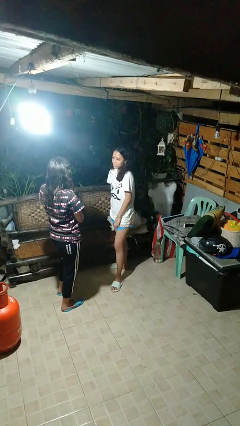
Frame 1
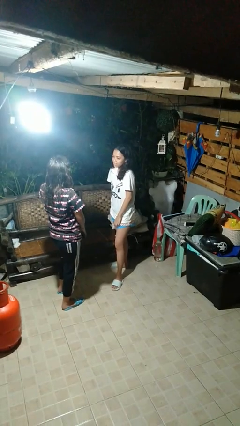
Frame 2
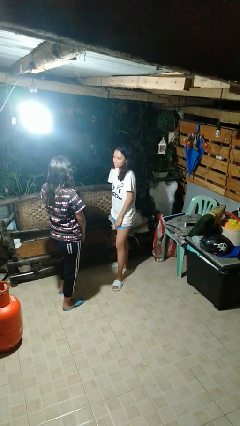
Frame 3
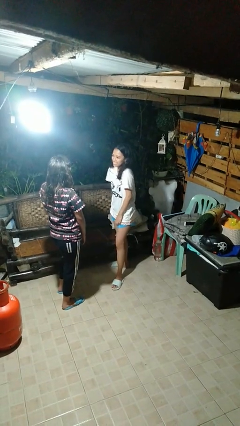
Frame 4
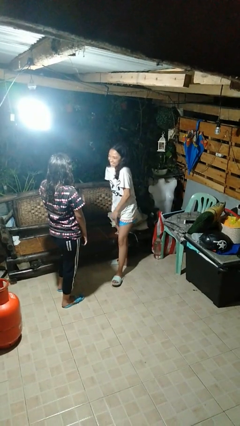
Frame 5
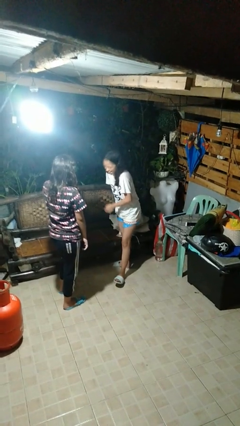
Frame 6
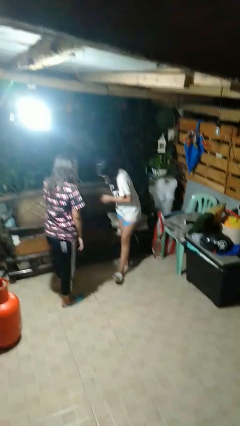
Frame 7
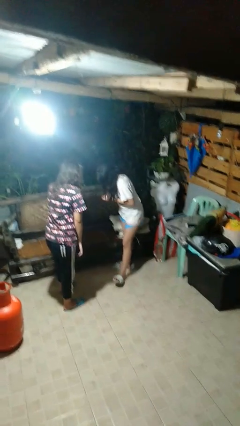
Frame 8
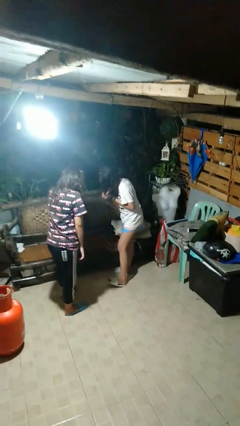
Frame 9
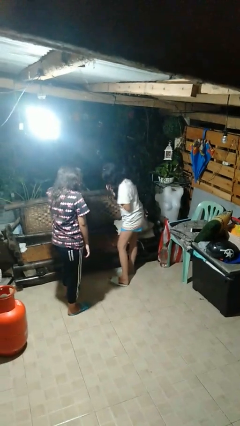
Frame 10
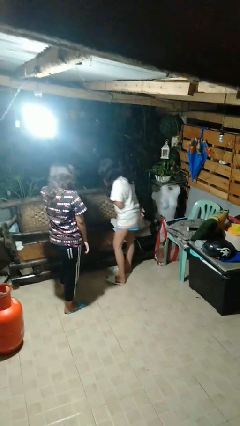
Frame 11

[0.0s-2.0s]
person laughs with person

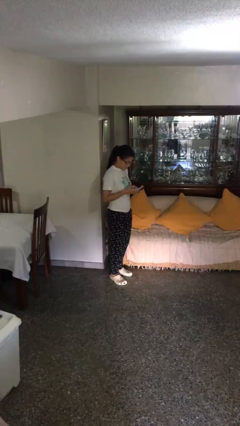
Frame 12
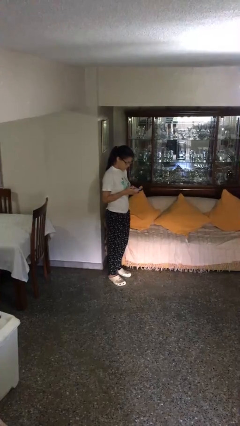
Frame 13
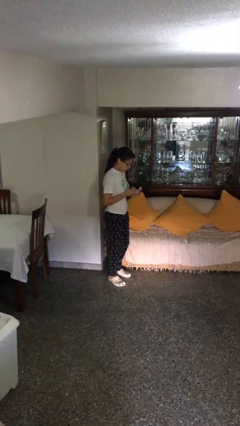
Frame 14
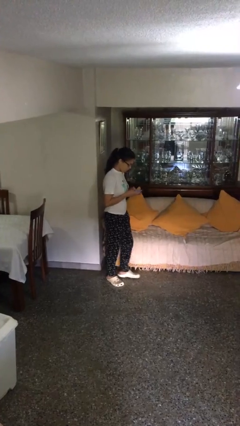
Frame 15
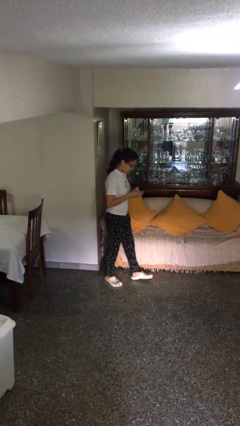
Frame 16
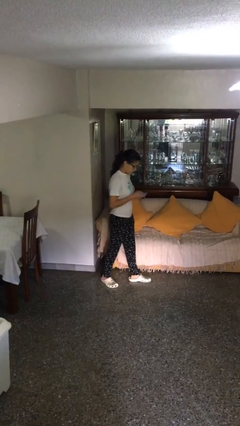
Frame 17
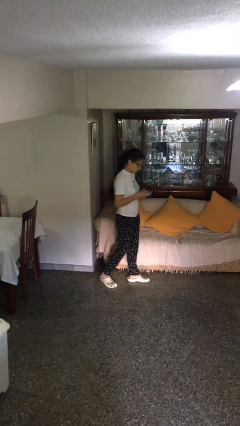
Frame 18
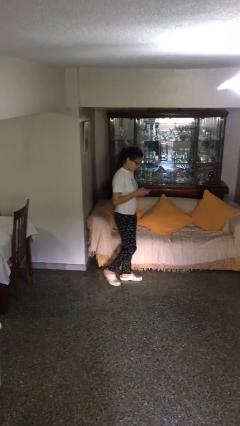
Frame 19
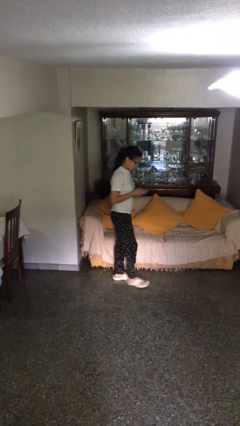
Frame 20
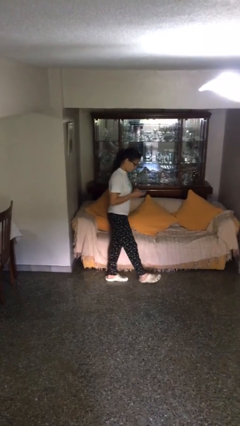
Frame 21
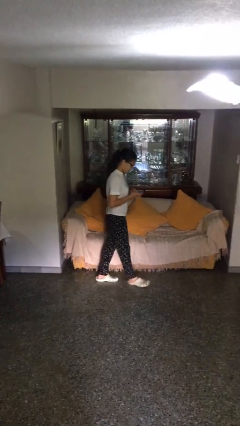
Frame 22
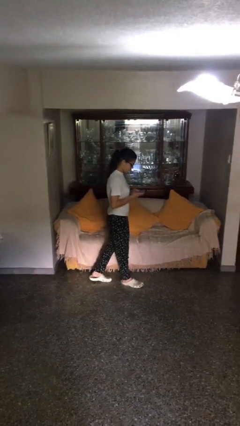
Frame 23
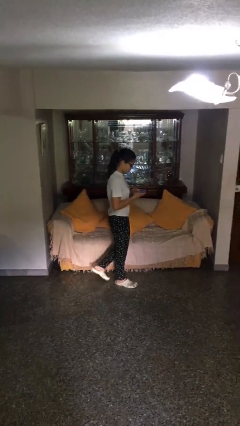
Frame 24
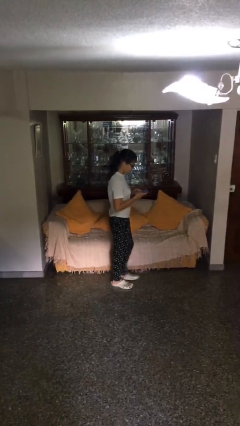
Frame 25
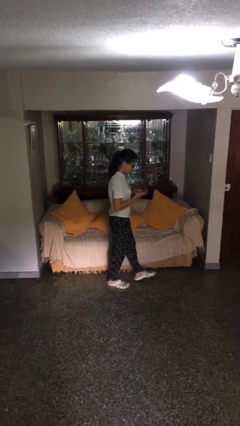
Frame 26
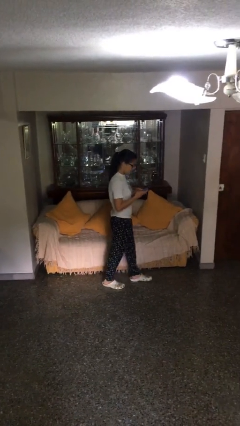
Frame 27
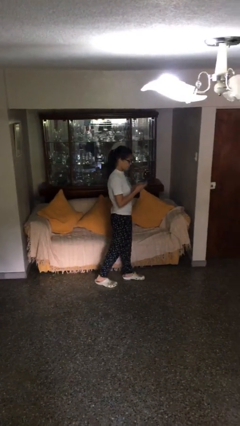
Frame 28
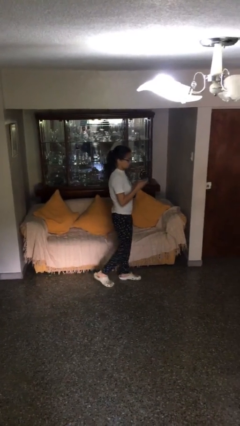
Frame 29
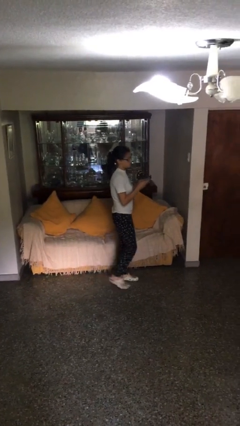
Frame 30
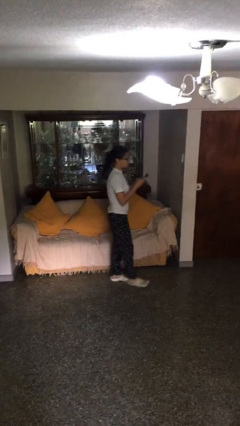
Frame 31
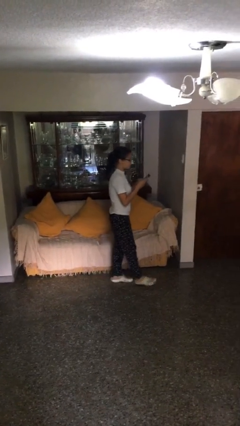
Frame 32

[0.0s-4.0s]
person texts on phone

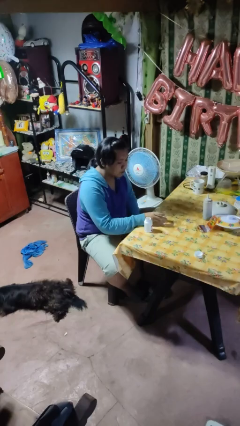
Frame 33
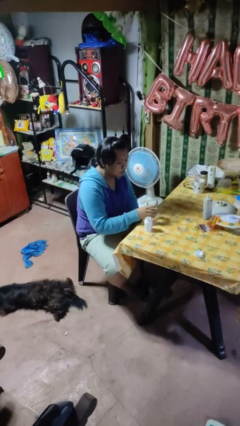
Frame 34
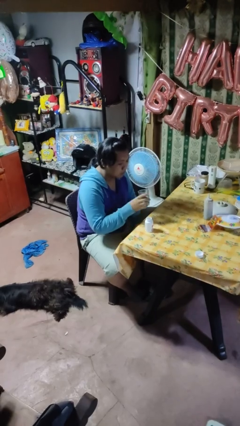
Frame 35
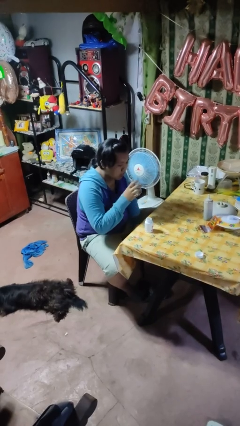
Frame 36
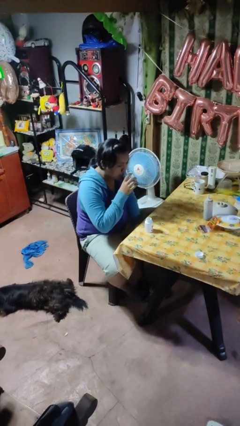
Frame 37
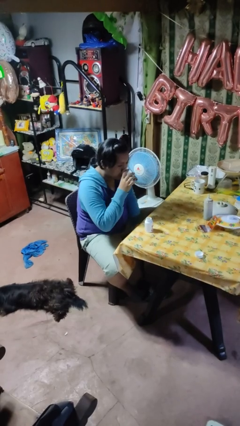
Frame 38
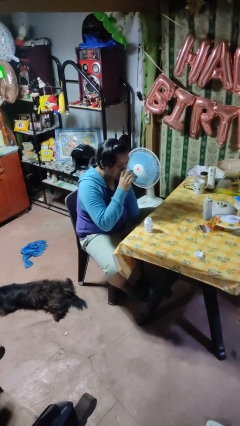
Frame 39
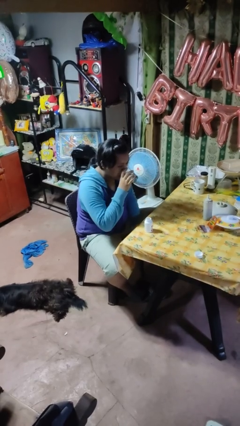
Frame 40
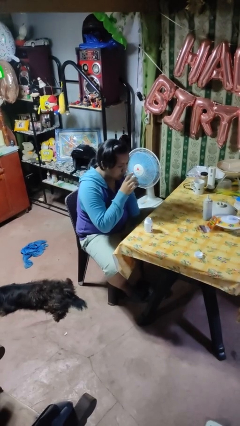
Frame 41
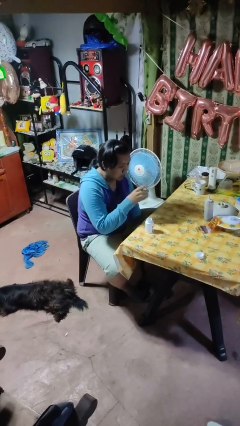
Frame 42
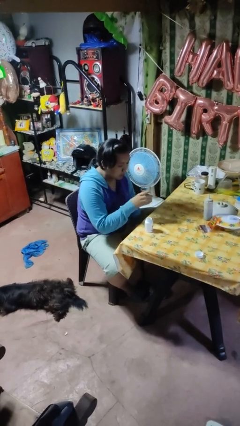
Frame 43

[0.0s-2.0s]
person drinks from cup

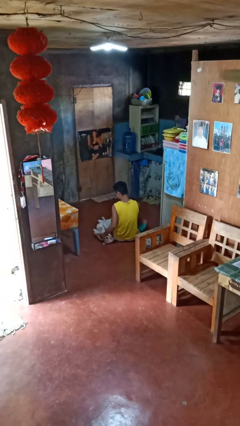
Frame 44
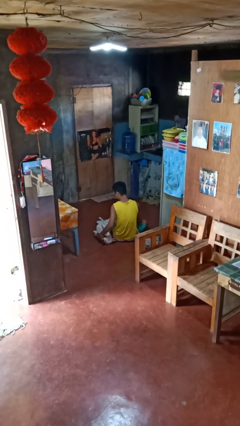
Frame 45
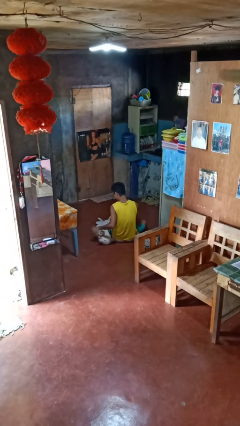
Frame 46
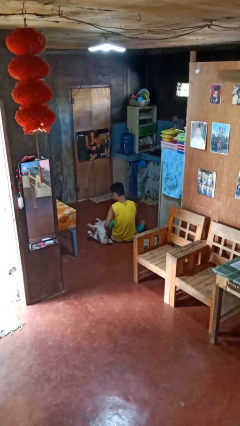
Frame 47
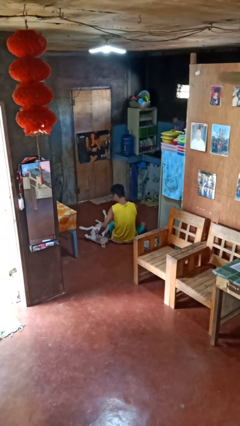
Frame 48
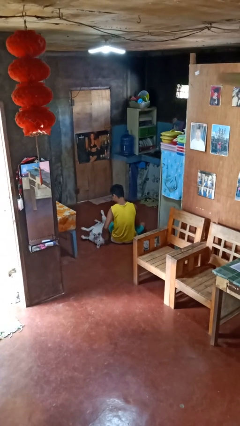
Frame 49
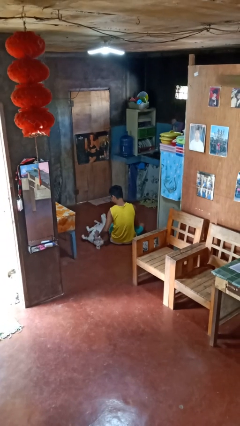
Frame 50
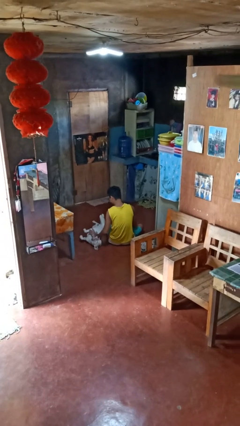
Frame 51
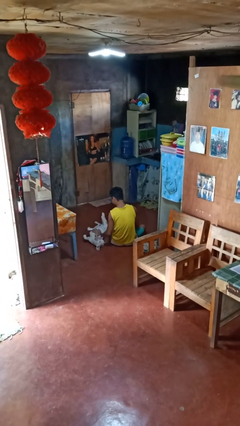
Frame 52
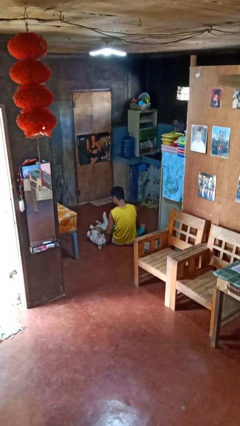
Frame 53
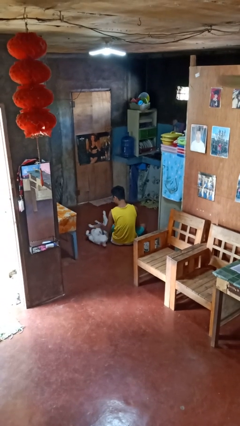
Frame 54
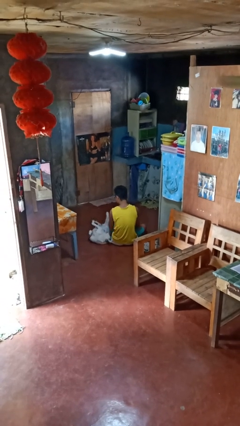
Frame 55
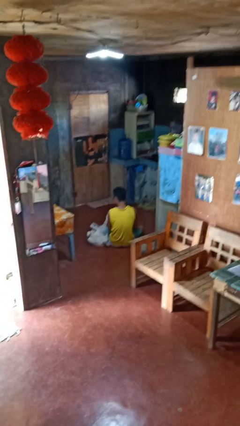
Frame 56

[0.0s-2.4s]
person pets dog

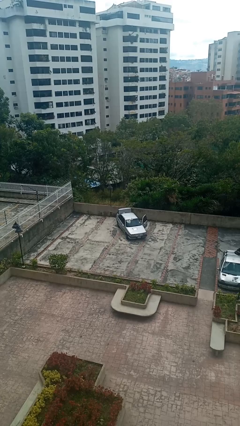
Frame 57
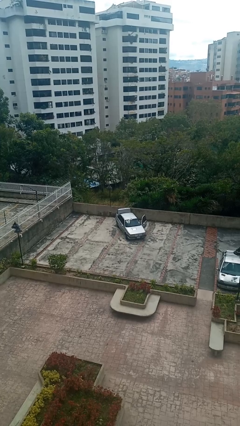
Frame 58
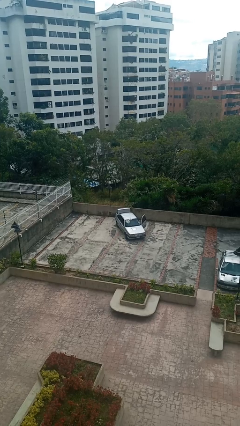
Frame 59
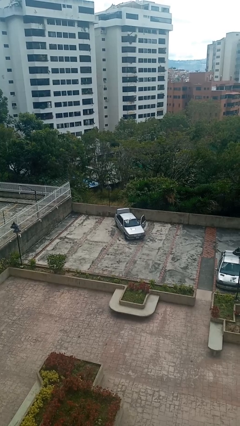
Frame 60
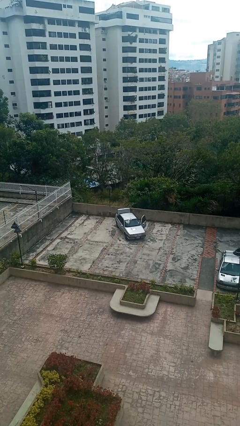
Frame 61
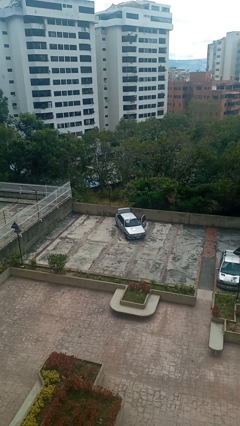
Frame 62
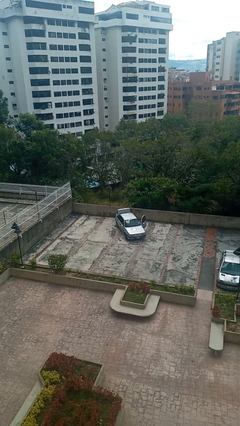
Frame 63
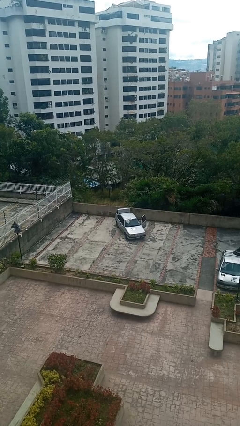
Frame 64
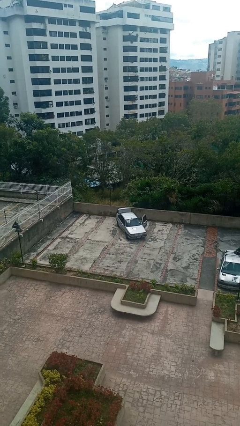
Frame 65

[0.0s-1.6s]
person loads car

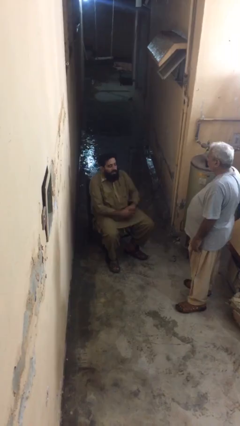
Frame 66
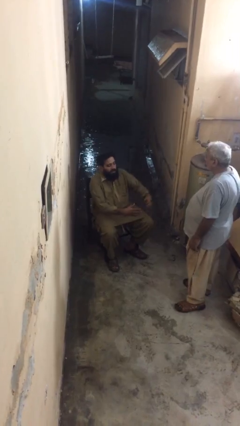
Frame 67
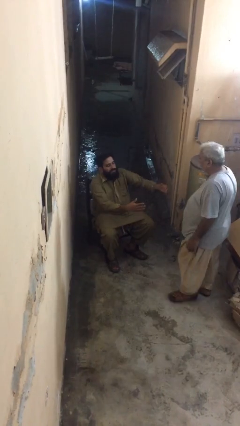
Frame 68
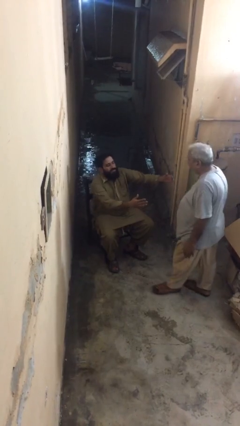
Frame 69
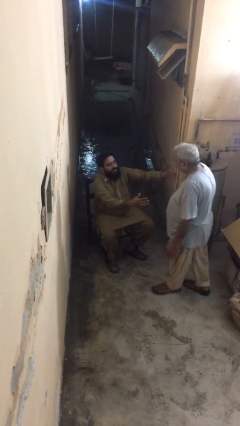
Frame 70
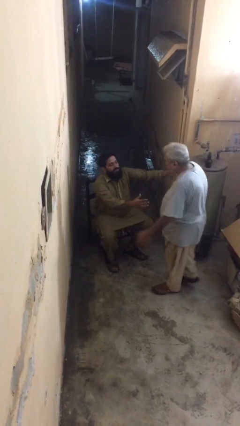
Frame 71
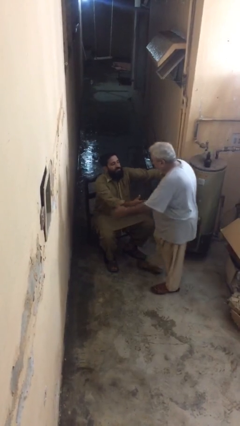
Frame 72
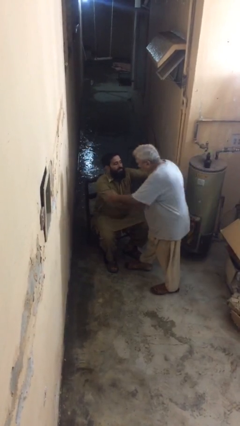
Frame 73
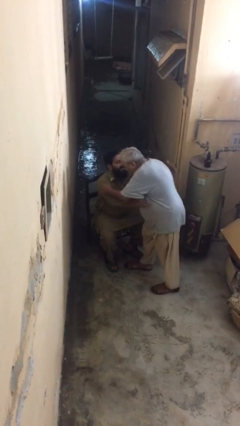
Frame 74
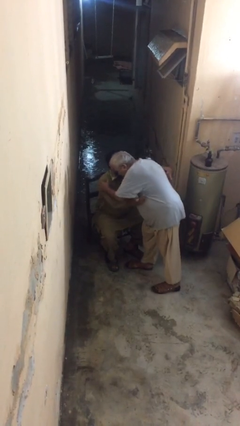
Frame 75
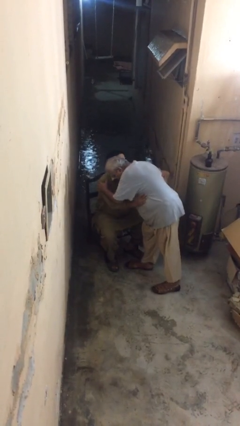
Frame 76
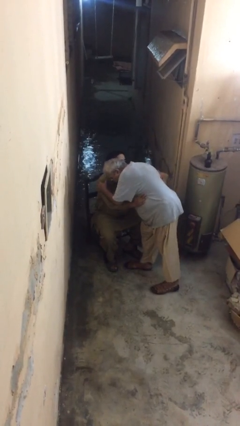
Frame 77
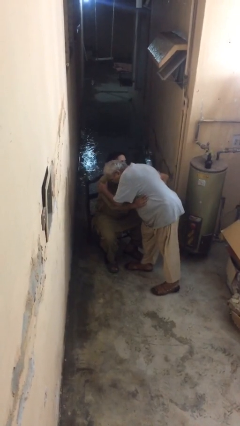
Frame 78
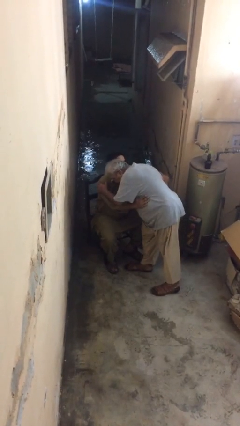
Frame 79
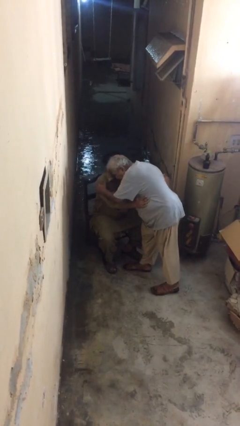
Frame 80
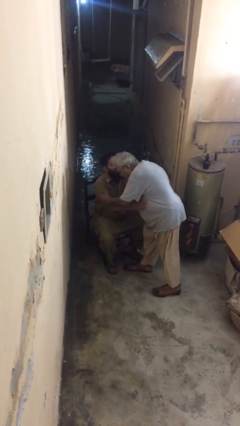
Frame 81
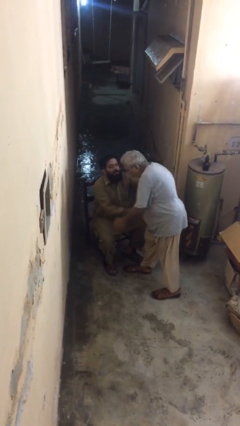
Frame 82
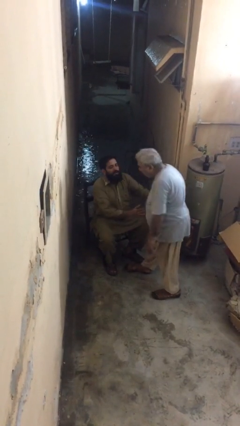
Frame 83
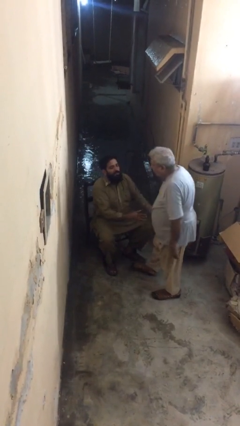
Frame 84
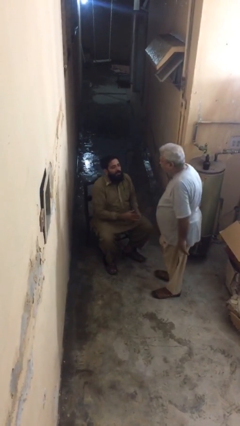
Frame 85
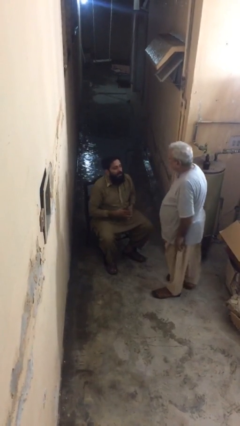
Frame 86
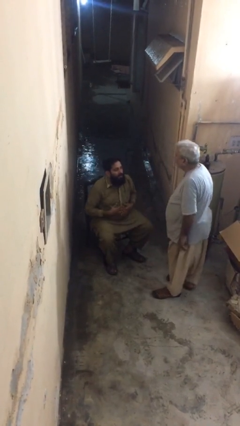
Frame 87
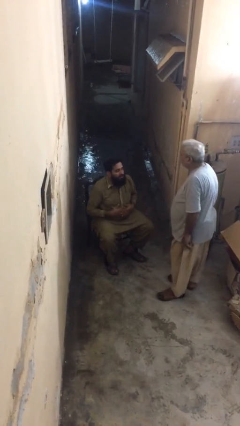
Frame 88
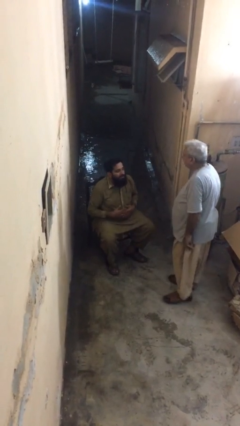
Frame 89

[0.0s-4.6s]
person embraces person

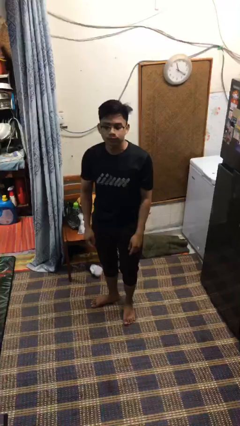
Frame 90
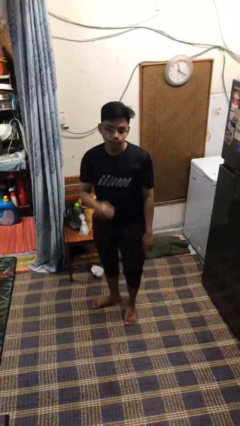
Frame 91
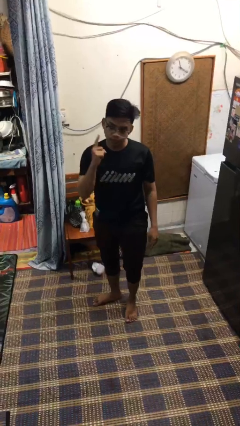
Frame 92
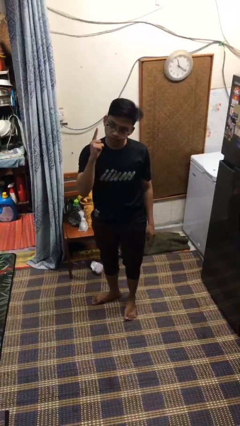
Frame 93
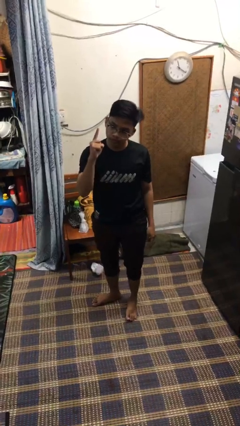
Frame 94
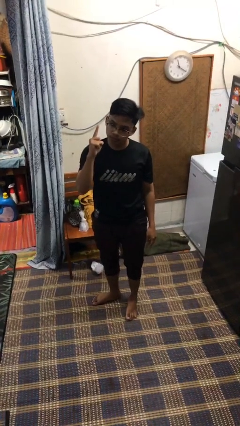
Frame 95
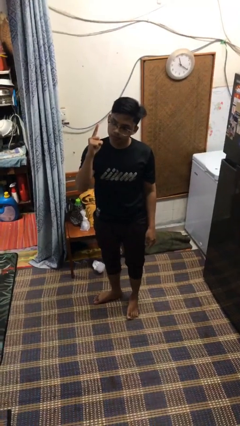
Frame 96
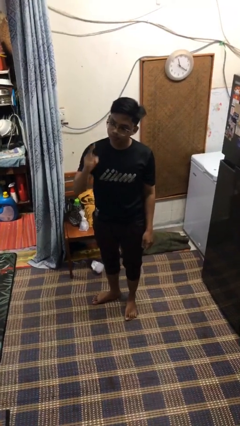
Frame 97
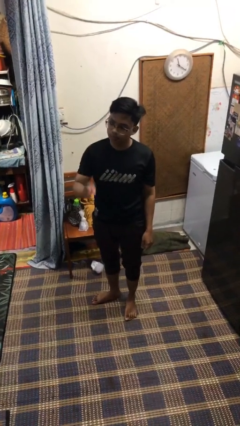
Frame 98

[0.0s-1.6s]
person gestures number one
